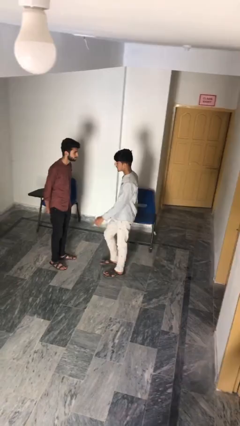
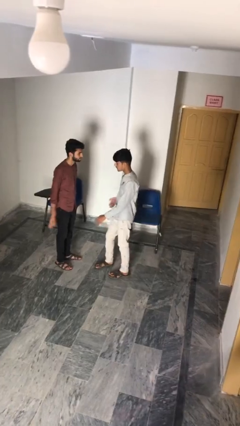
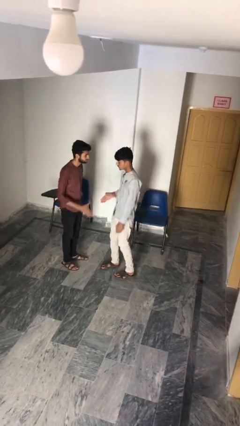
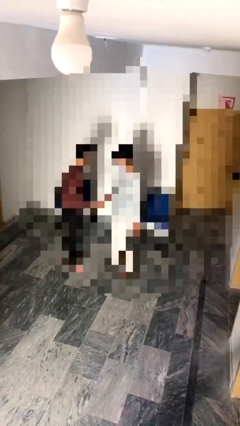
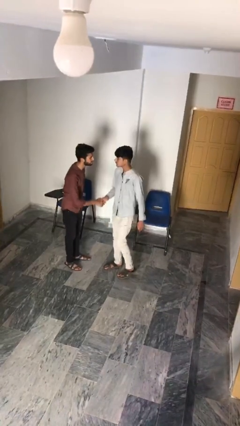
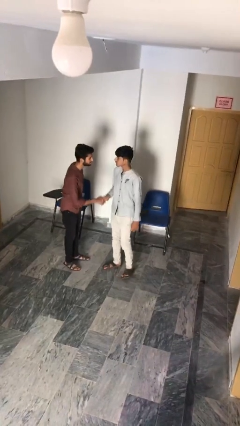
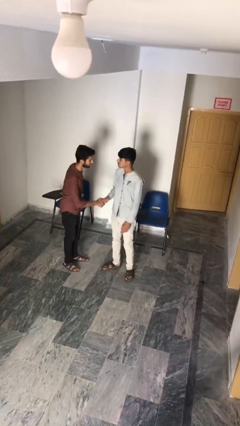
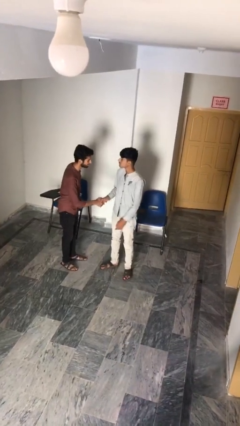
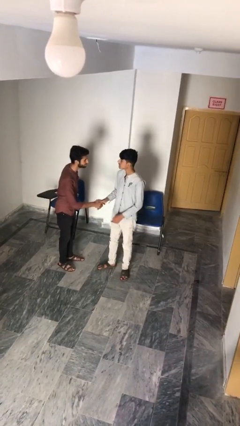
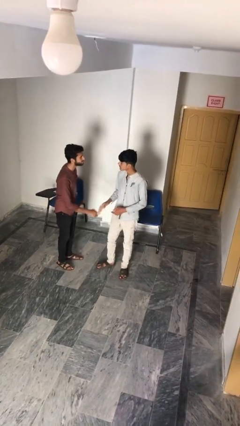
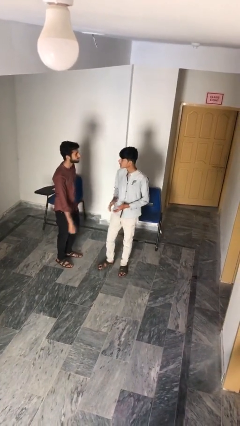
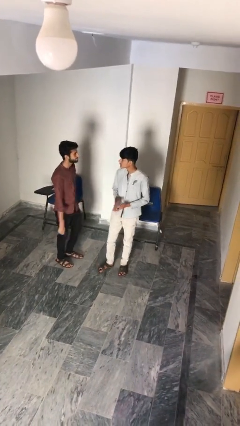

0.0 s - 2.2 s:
person shakes hand

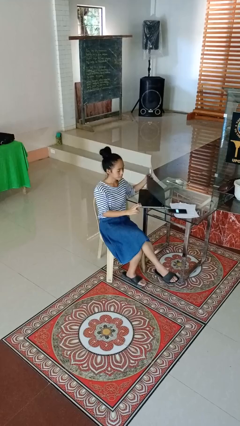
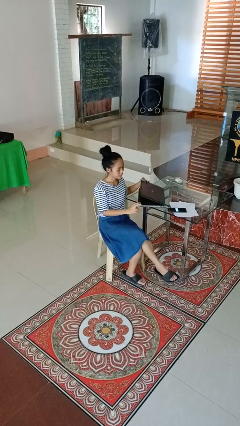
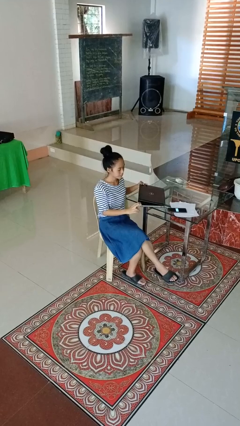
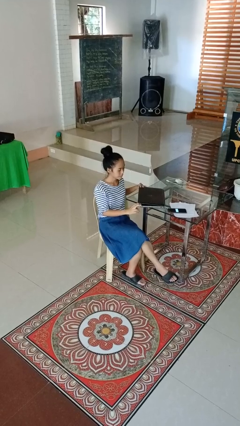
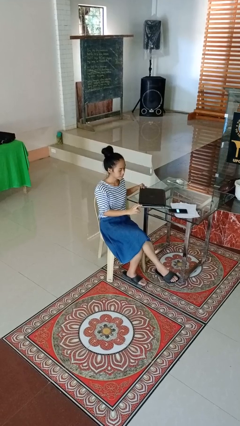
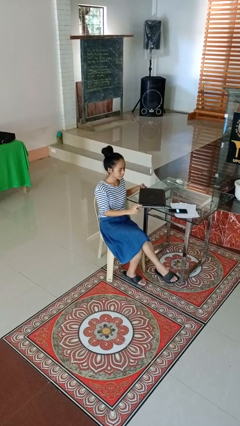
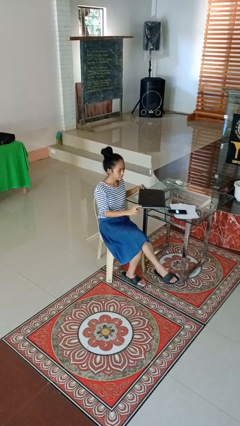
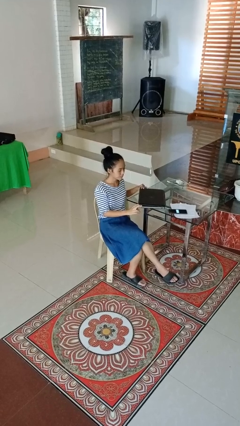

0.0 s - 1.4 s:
person closes laptop

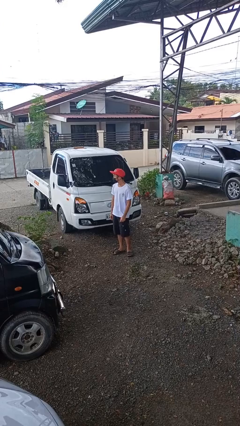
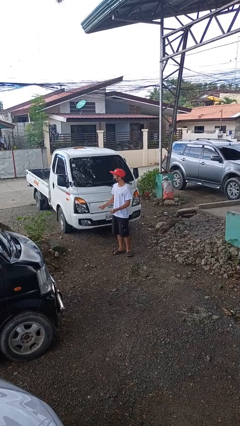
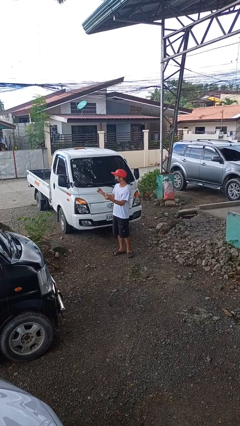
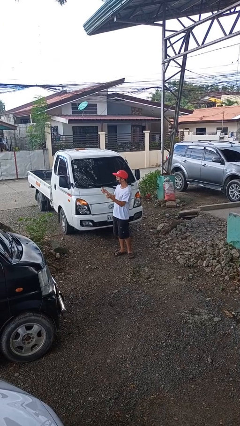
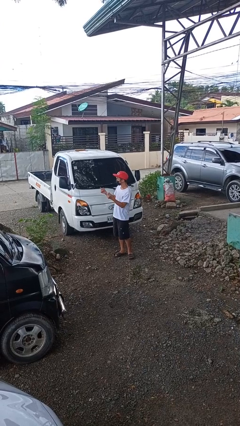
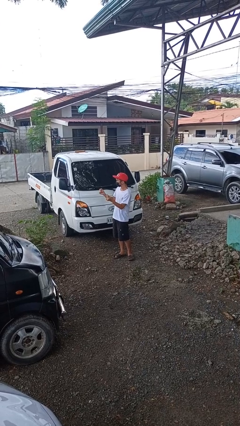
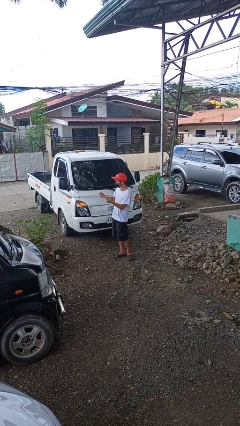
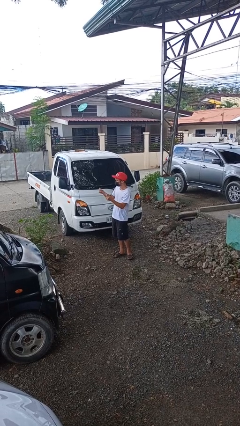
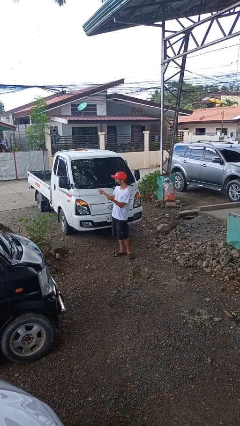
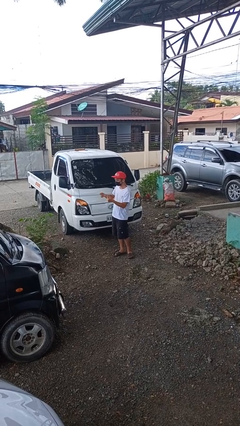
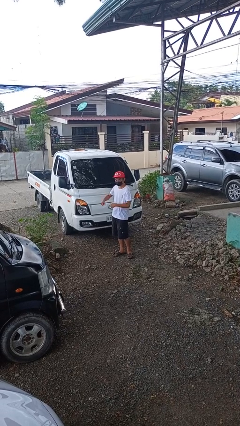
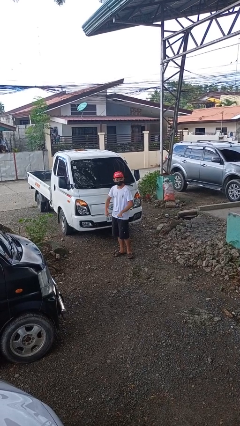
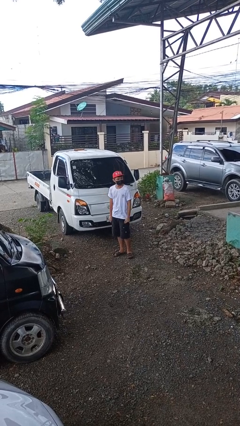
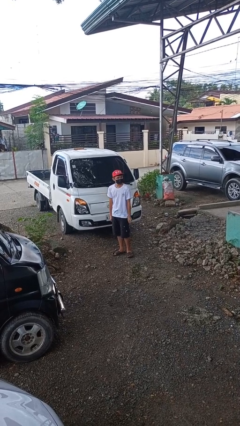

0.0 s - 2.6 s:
person snaps fingers

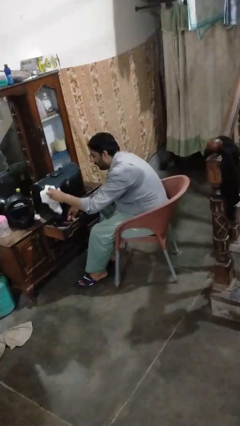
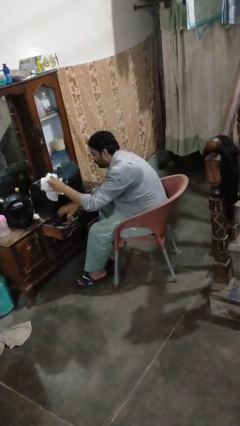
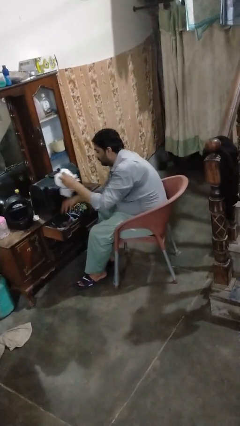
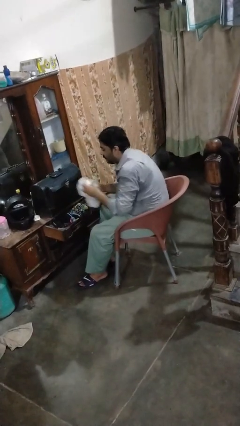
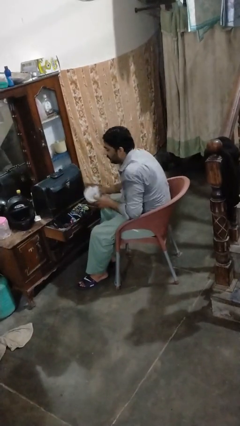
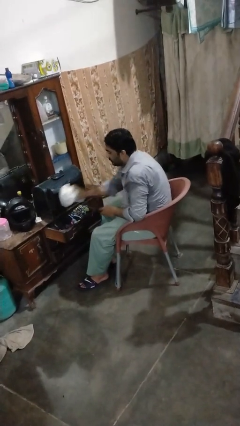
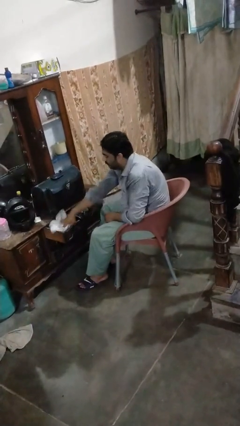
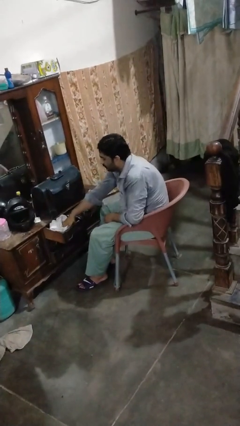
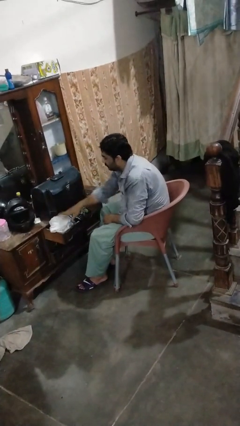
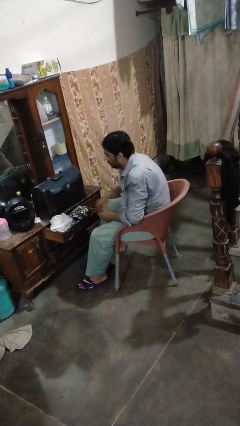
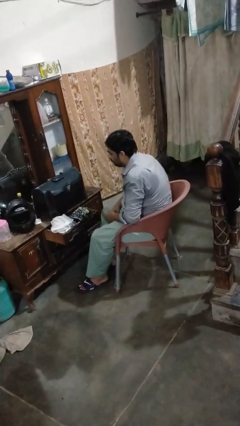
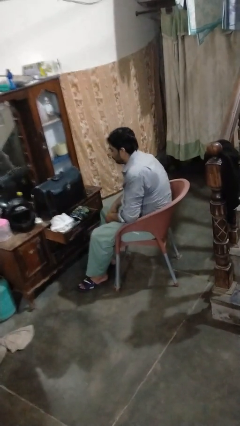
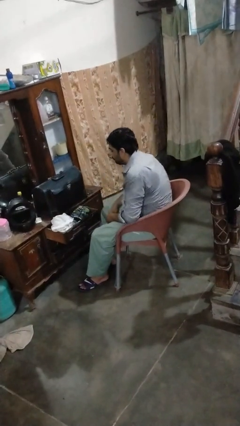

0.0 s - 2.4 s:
person puts clothes into dresser

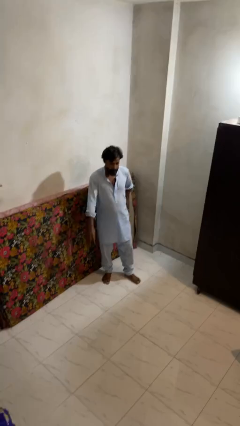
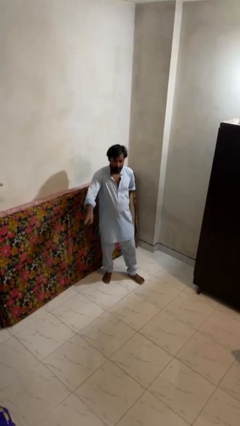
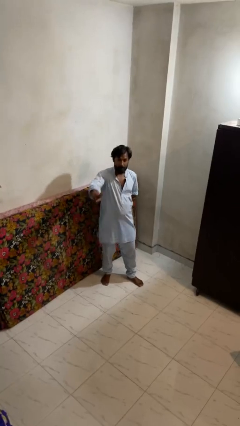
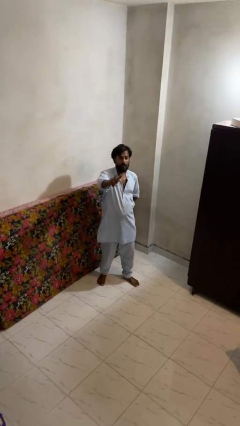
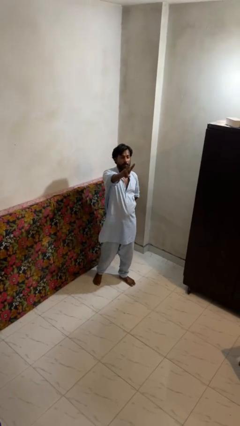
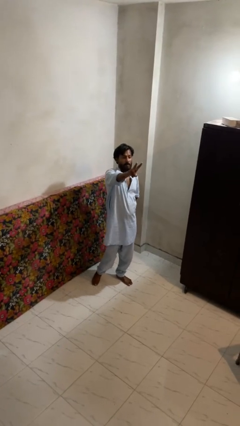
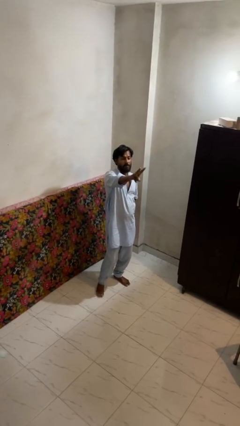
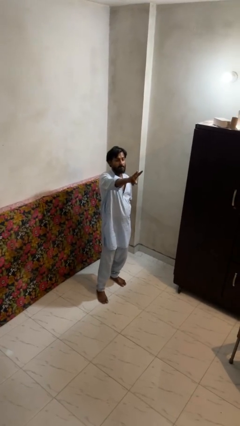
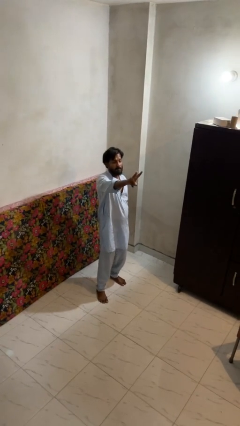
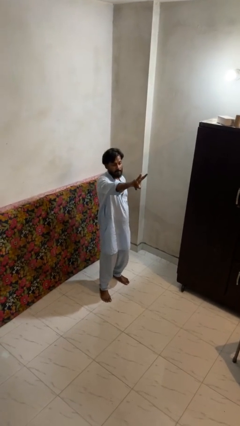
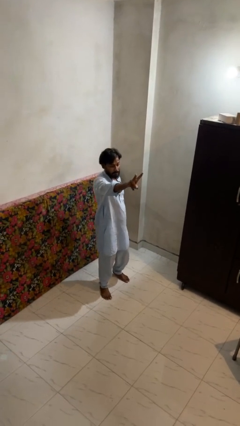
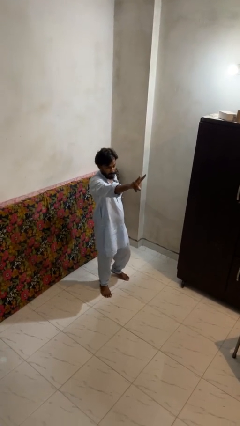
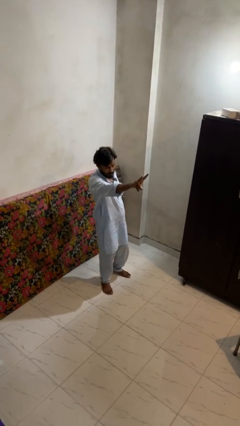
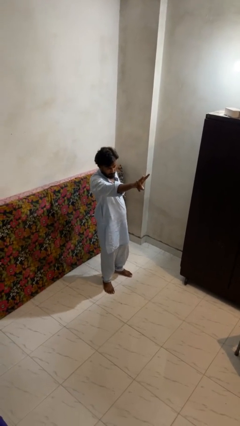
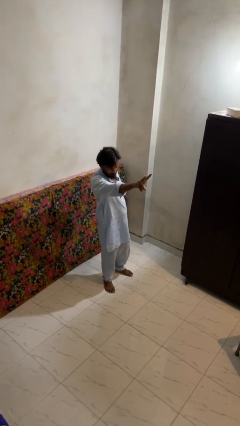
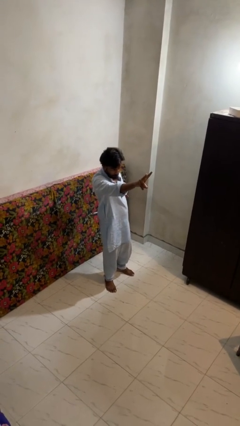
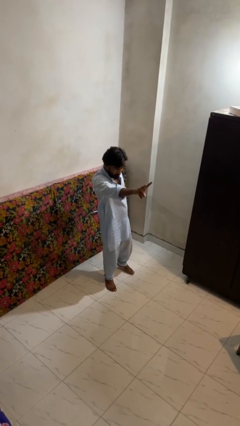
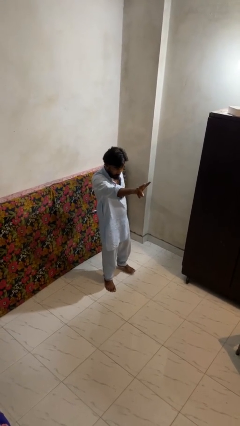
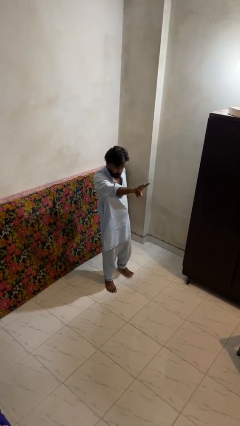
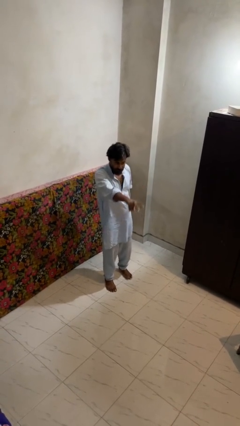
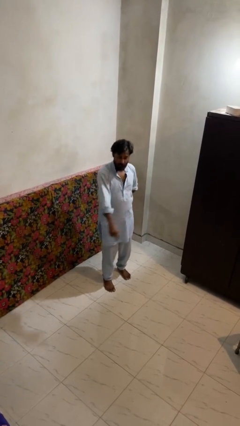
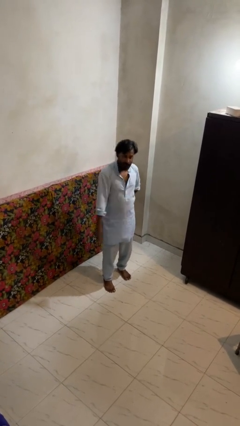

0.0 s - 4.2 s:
person gestures peace

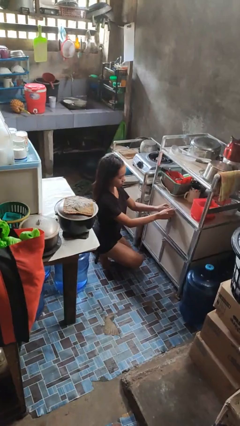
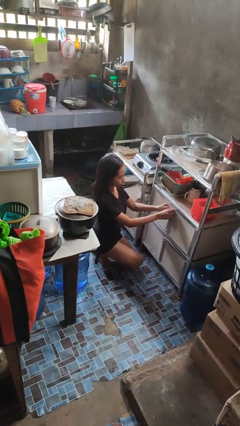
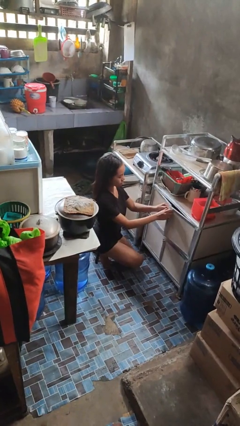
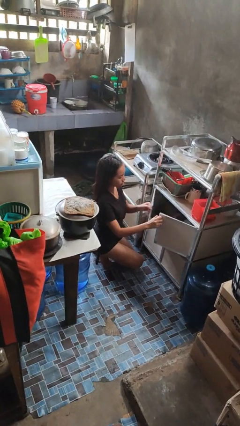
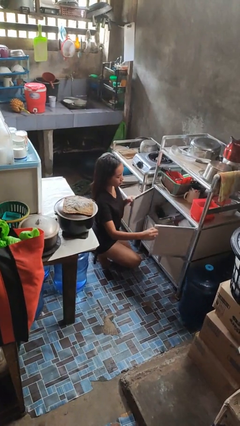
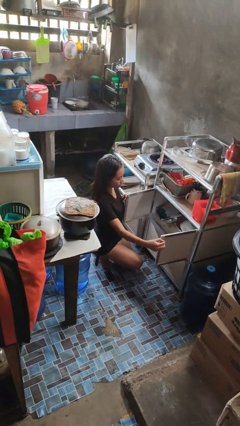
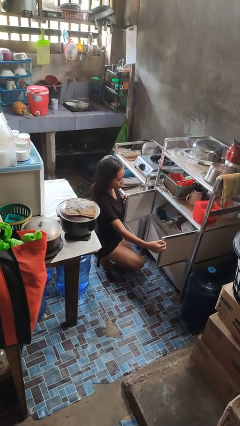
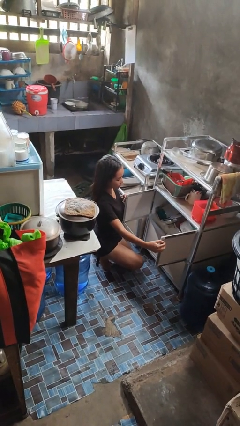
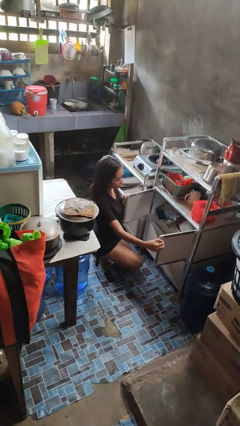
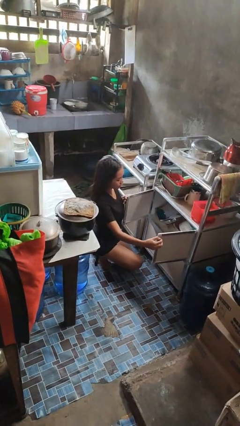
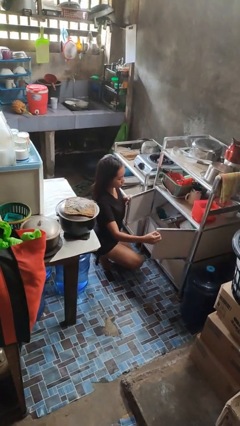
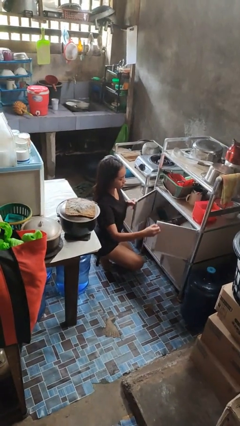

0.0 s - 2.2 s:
person opens cabinet

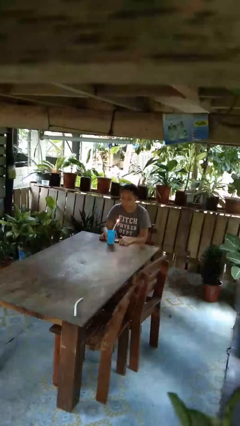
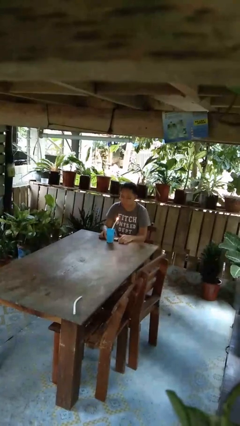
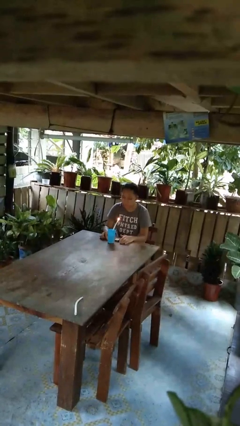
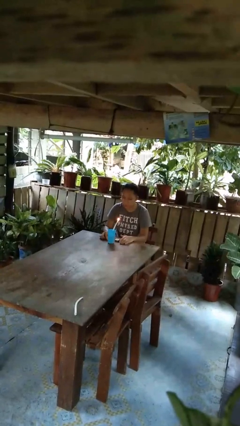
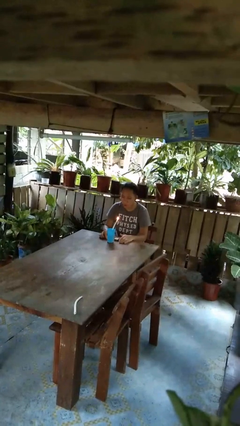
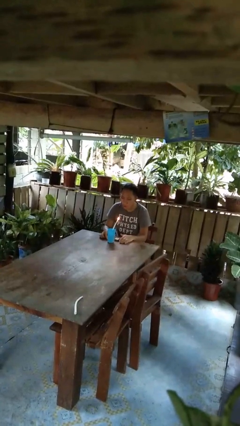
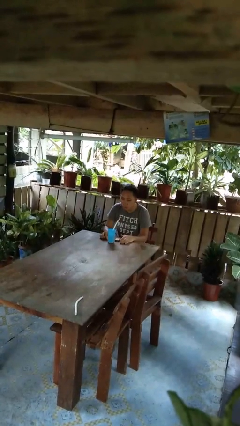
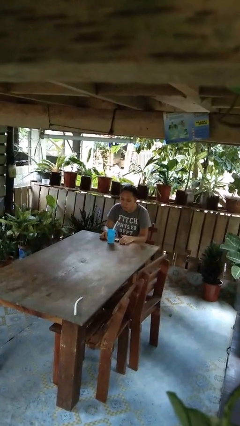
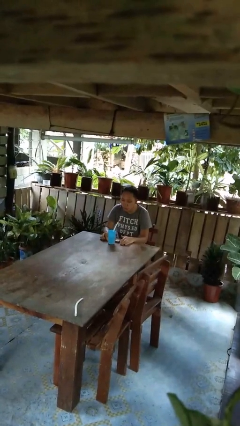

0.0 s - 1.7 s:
person extinguishes candle
